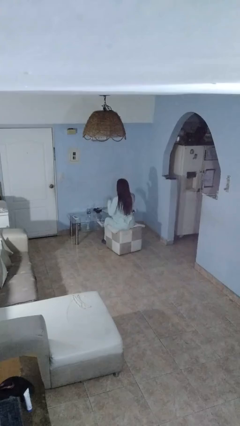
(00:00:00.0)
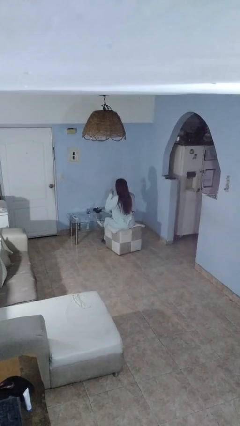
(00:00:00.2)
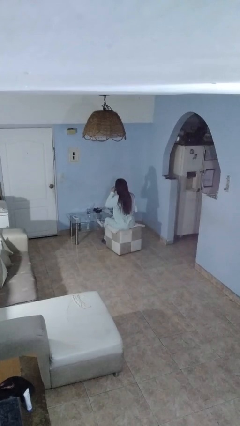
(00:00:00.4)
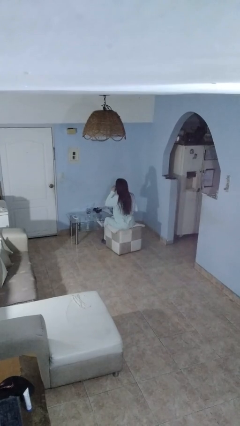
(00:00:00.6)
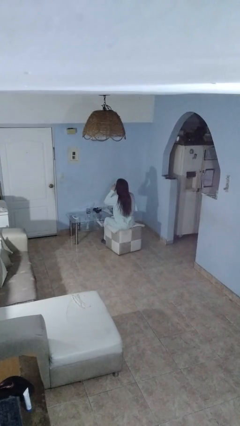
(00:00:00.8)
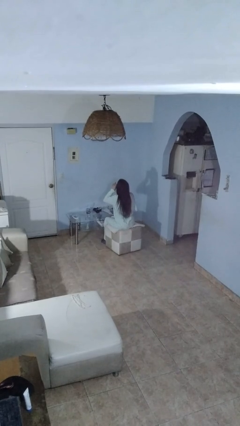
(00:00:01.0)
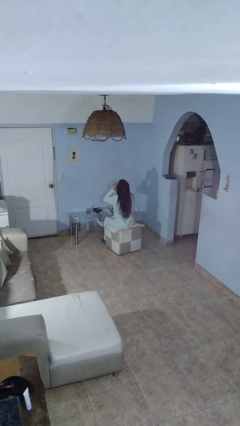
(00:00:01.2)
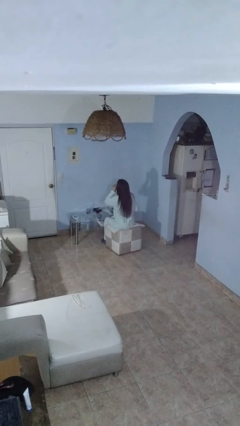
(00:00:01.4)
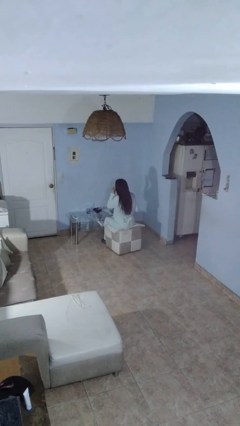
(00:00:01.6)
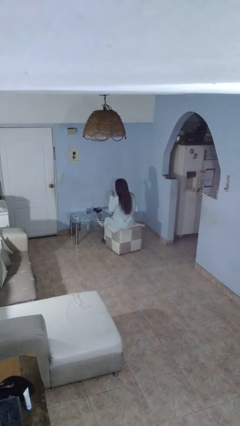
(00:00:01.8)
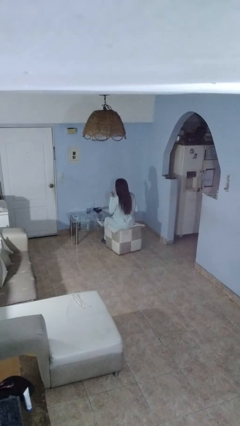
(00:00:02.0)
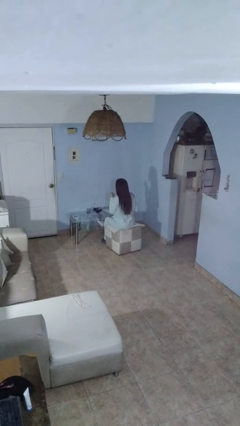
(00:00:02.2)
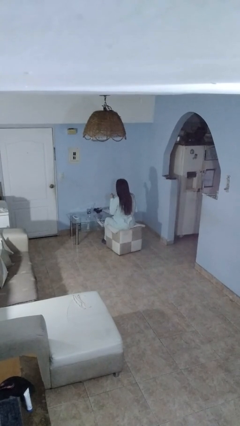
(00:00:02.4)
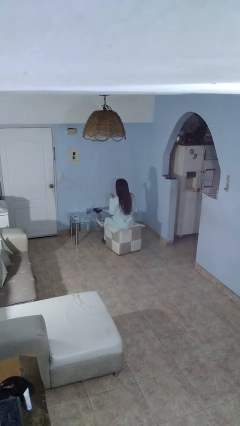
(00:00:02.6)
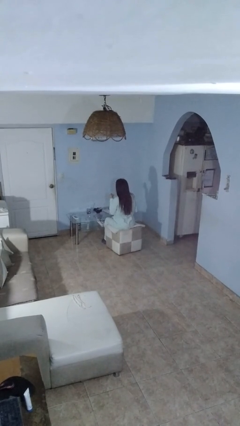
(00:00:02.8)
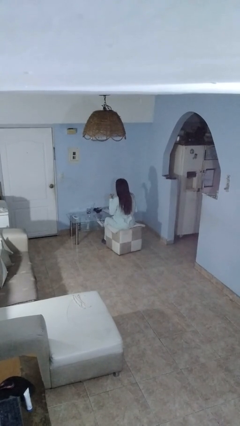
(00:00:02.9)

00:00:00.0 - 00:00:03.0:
person drinks from shotglass

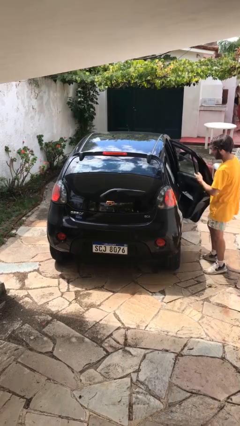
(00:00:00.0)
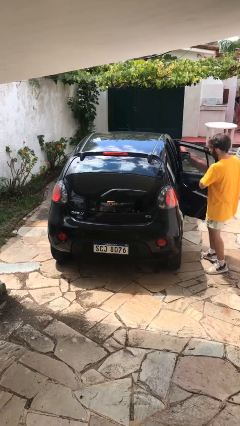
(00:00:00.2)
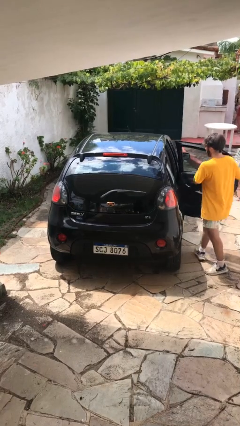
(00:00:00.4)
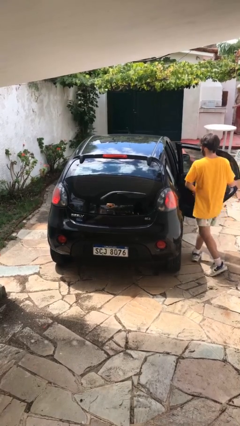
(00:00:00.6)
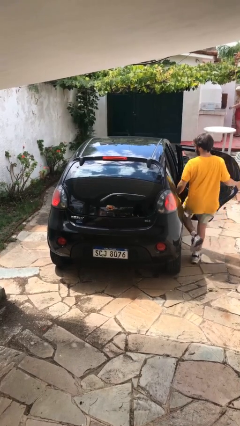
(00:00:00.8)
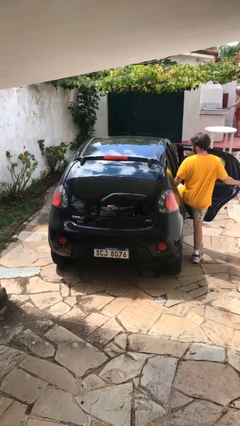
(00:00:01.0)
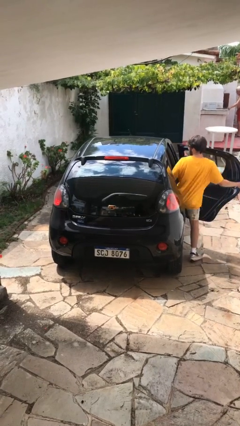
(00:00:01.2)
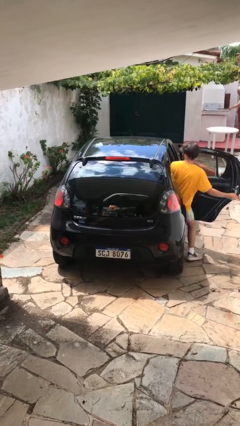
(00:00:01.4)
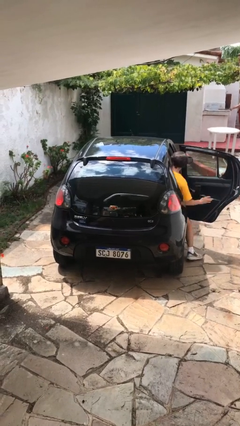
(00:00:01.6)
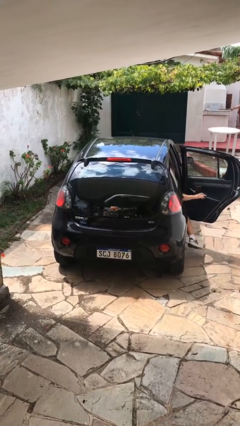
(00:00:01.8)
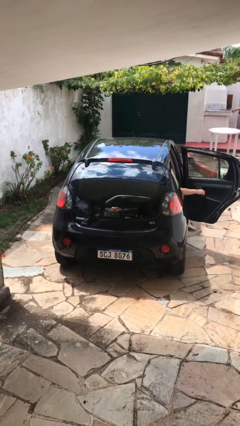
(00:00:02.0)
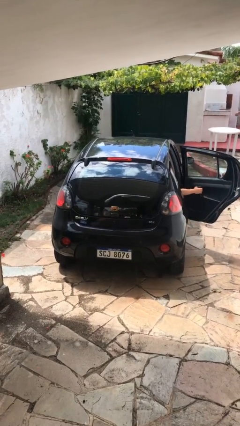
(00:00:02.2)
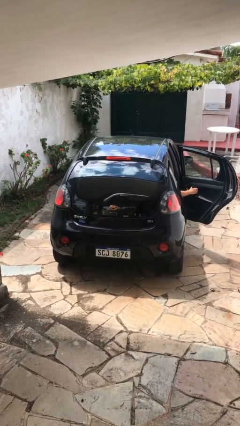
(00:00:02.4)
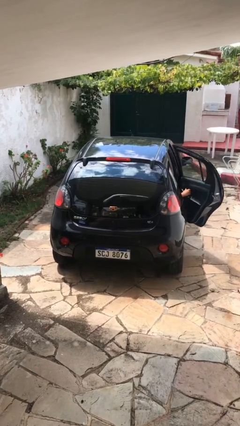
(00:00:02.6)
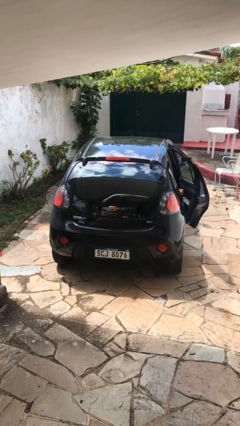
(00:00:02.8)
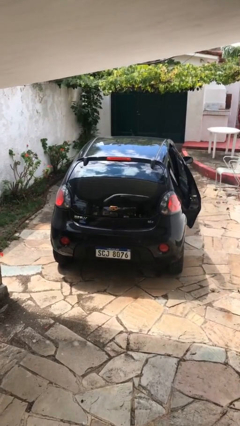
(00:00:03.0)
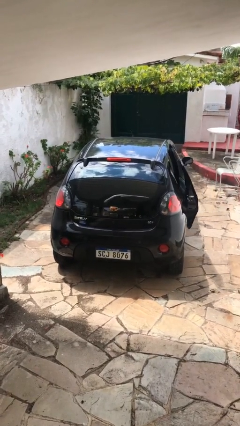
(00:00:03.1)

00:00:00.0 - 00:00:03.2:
car picks up person

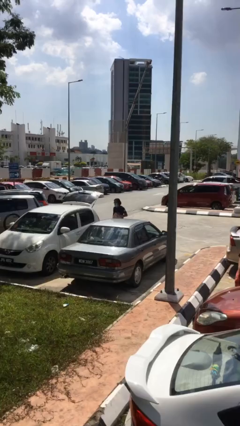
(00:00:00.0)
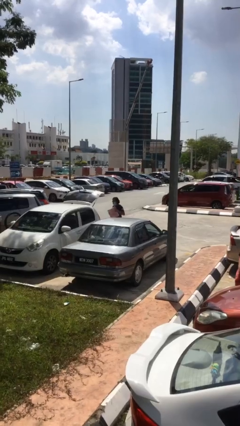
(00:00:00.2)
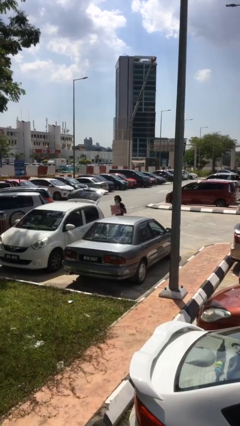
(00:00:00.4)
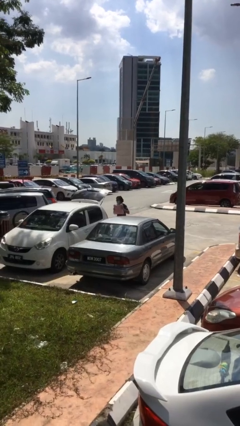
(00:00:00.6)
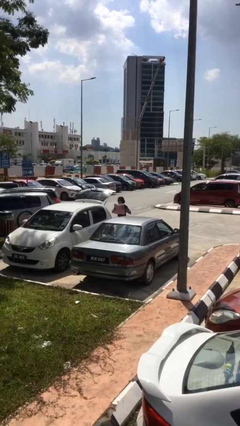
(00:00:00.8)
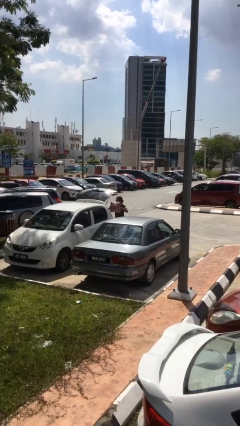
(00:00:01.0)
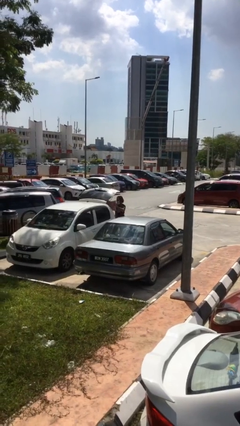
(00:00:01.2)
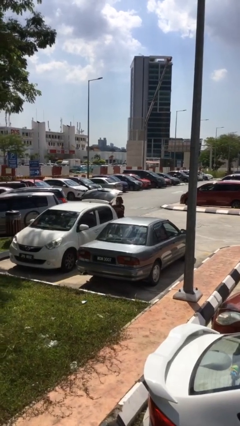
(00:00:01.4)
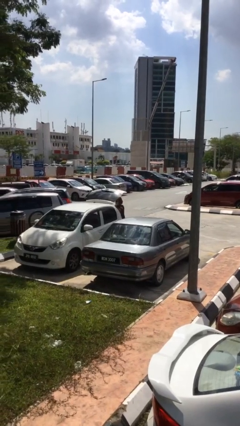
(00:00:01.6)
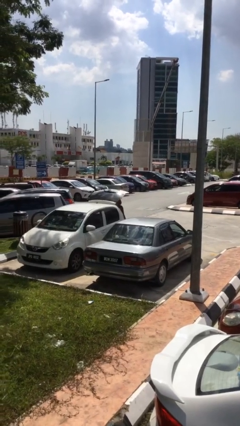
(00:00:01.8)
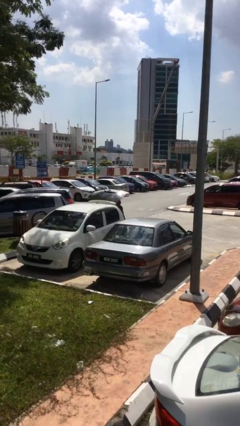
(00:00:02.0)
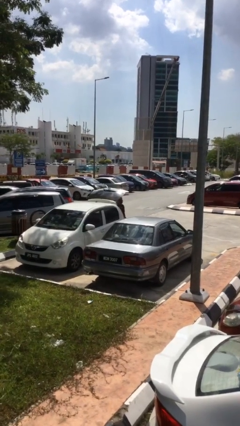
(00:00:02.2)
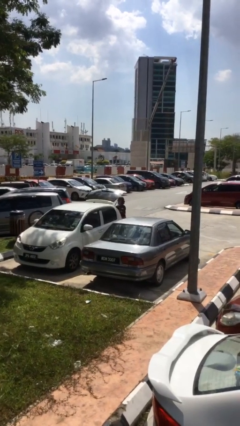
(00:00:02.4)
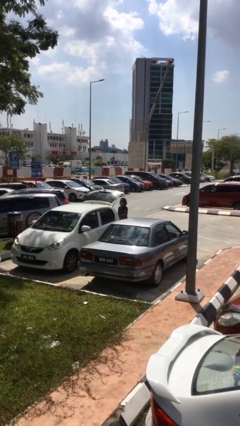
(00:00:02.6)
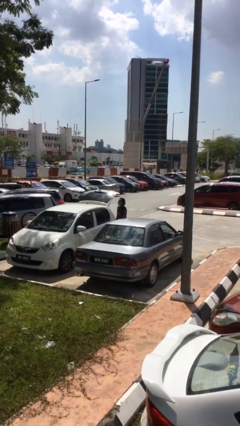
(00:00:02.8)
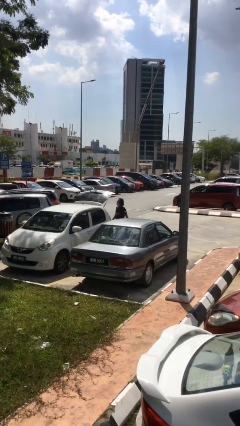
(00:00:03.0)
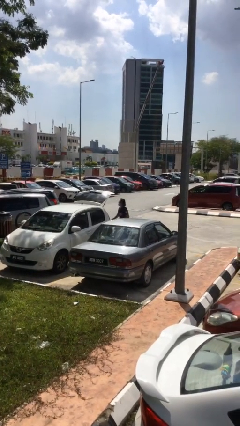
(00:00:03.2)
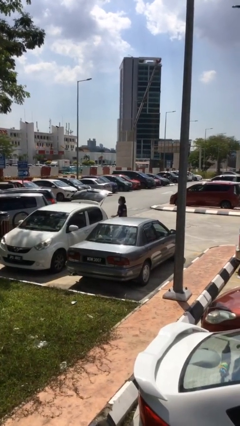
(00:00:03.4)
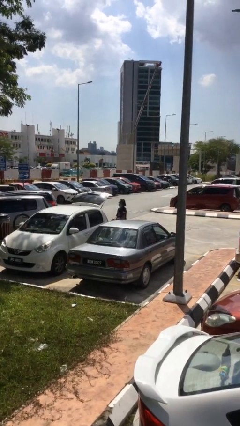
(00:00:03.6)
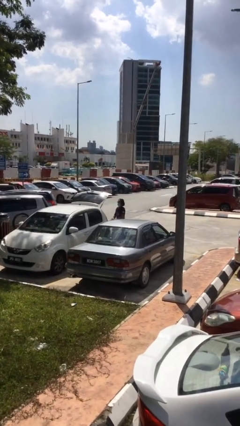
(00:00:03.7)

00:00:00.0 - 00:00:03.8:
person loads car

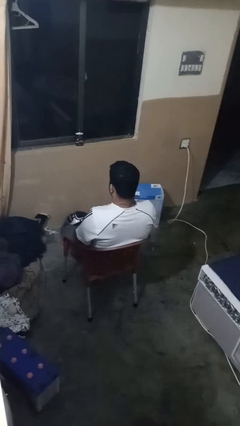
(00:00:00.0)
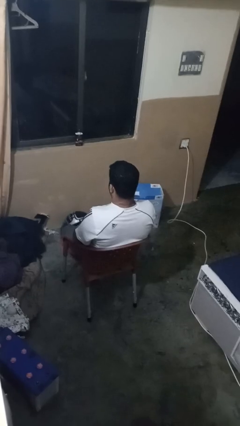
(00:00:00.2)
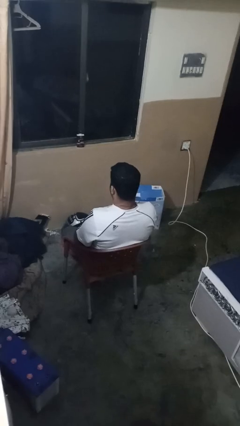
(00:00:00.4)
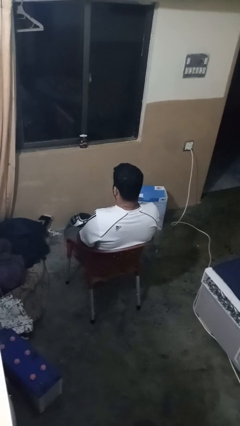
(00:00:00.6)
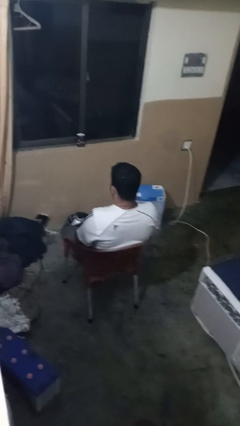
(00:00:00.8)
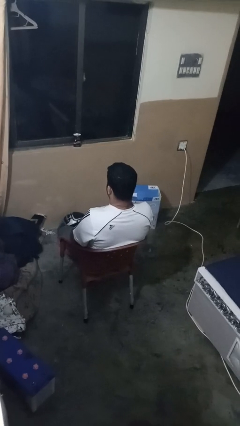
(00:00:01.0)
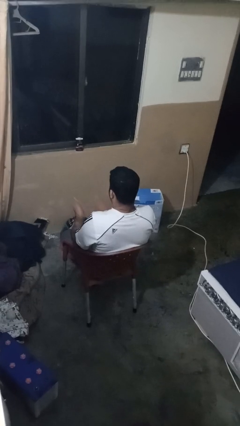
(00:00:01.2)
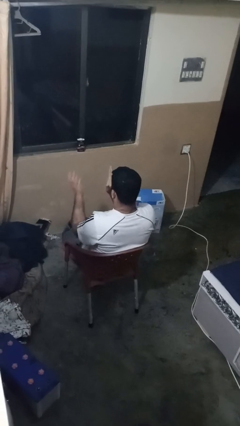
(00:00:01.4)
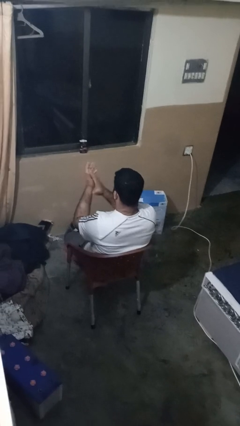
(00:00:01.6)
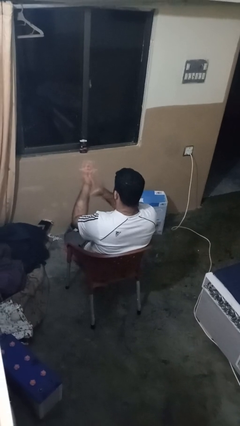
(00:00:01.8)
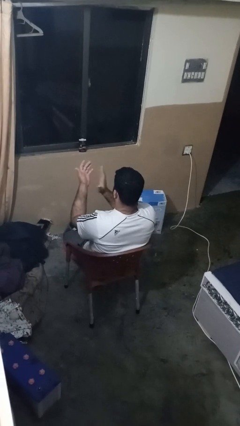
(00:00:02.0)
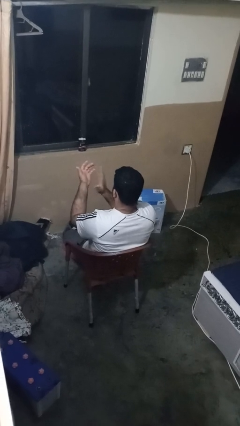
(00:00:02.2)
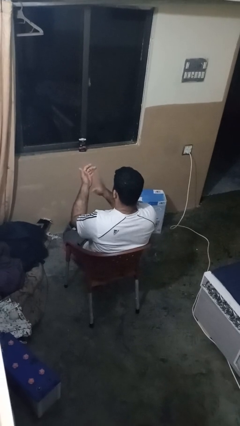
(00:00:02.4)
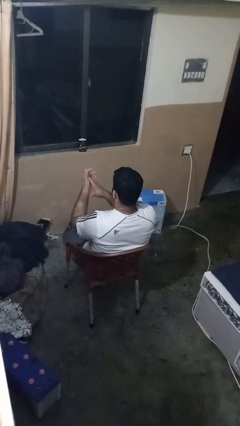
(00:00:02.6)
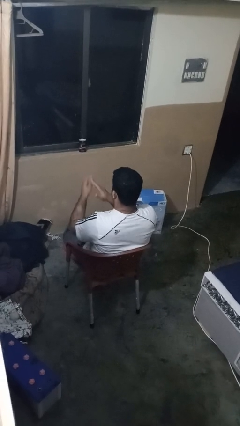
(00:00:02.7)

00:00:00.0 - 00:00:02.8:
person slaps hands on thighs

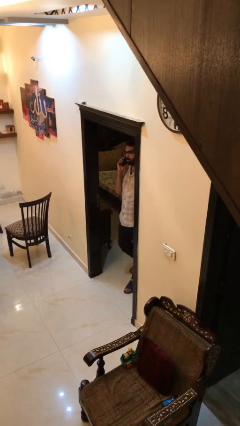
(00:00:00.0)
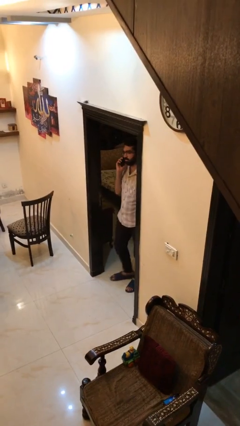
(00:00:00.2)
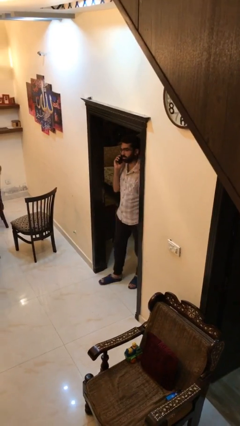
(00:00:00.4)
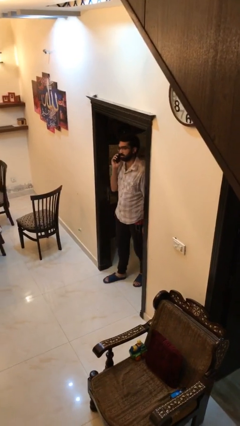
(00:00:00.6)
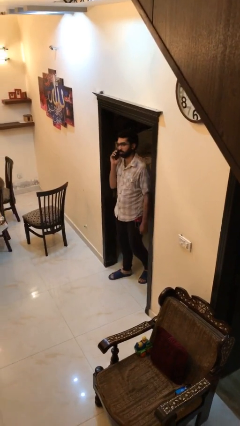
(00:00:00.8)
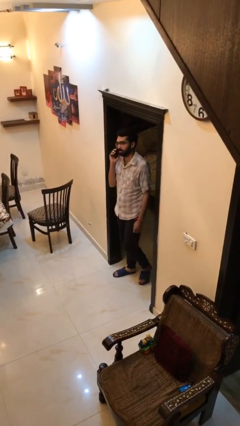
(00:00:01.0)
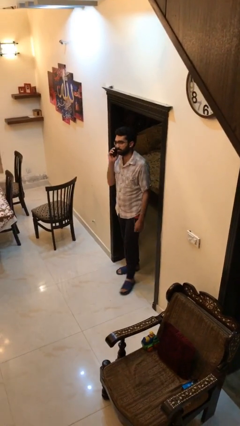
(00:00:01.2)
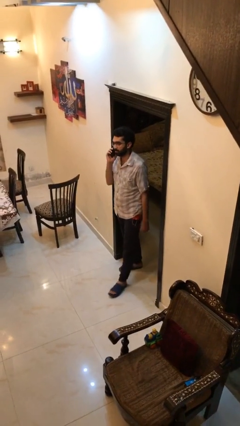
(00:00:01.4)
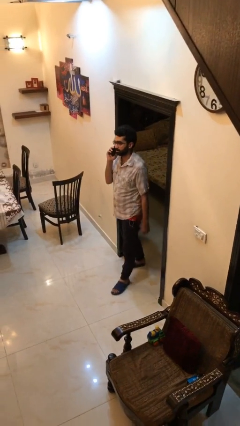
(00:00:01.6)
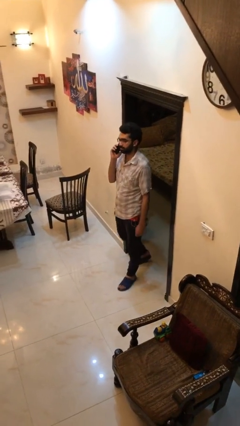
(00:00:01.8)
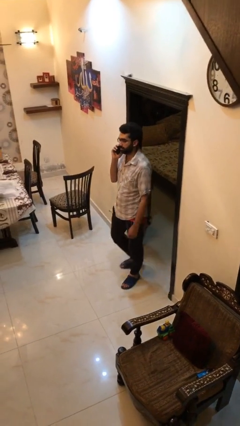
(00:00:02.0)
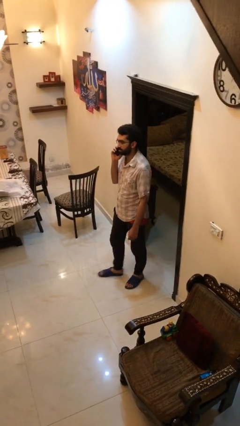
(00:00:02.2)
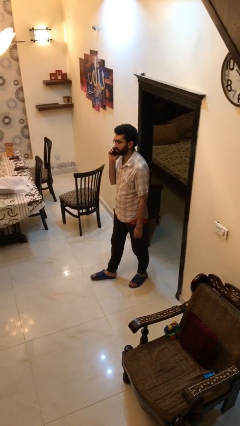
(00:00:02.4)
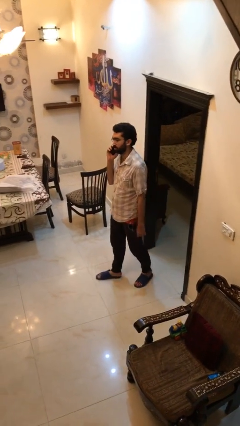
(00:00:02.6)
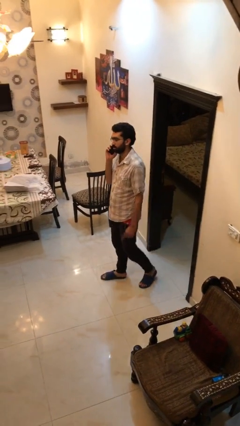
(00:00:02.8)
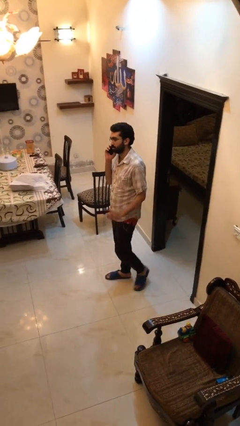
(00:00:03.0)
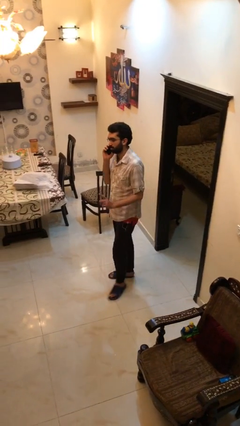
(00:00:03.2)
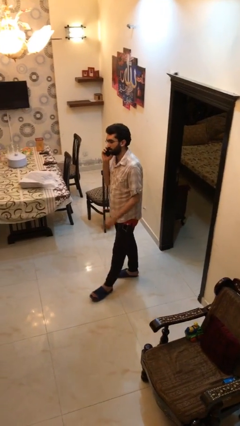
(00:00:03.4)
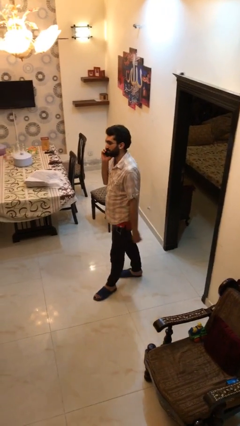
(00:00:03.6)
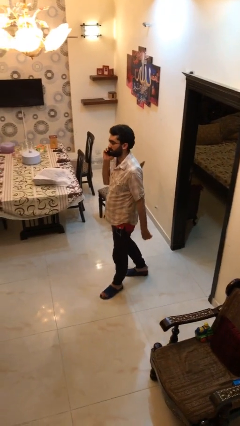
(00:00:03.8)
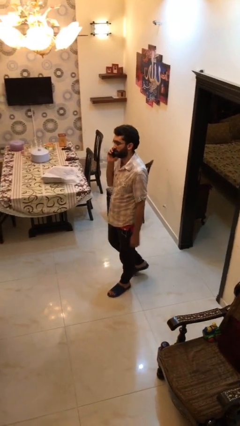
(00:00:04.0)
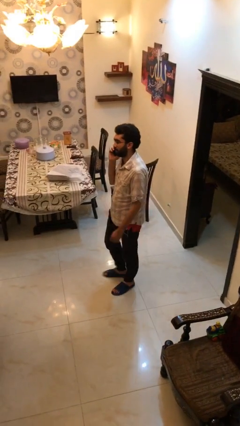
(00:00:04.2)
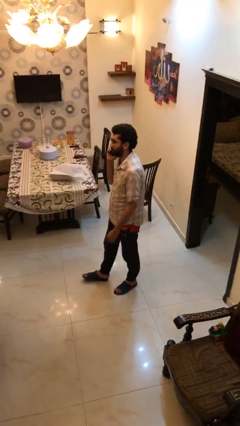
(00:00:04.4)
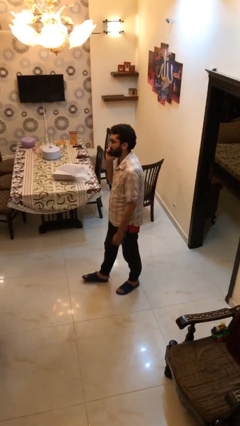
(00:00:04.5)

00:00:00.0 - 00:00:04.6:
person enters scene through structure
